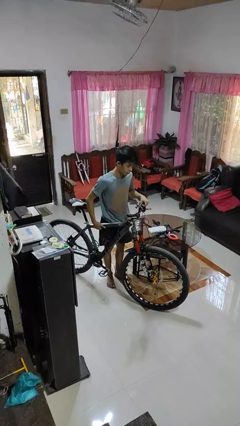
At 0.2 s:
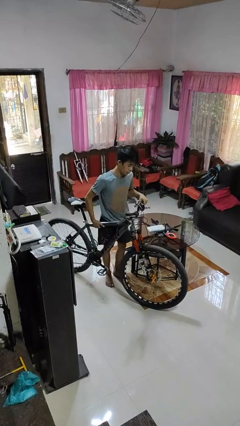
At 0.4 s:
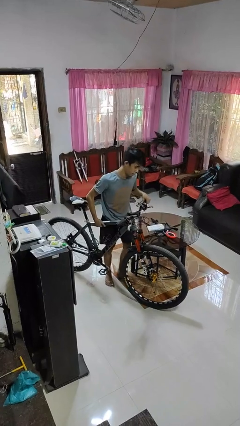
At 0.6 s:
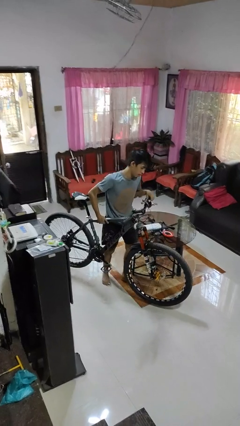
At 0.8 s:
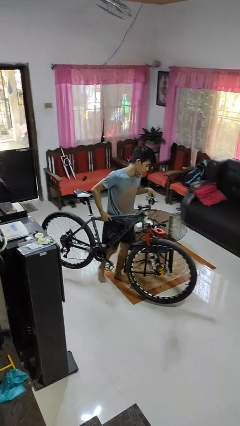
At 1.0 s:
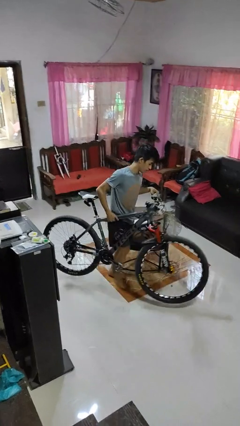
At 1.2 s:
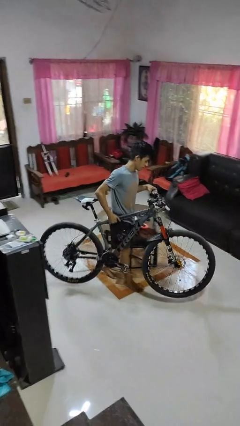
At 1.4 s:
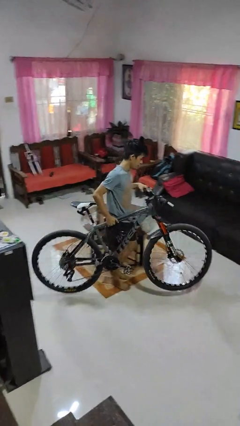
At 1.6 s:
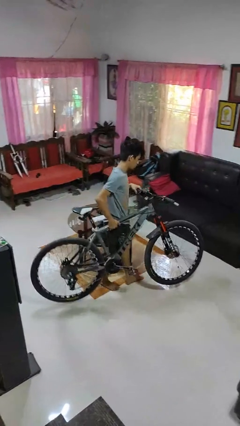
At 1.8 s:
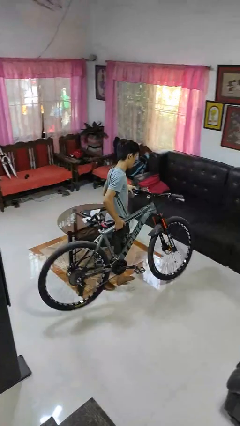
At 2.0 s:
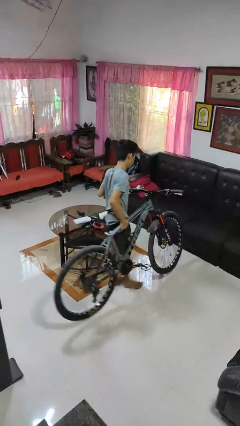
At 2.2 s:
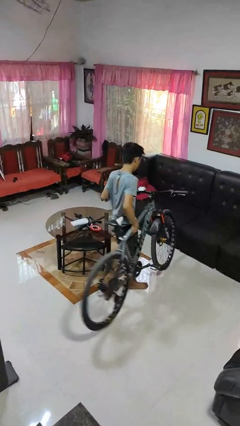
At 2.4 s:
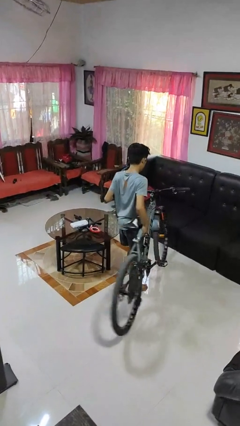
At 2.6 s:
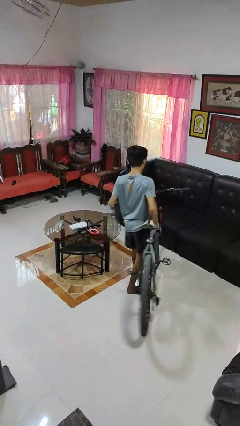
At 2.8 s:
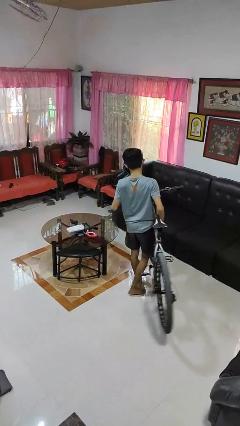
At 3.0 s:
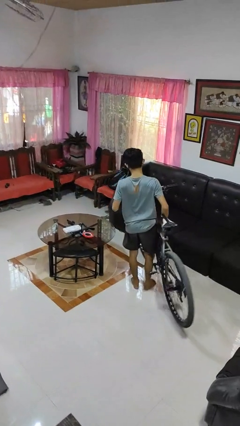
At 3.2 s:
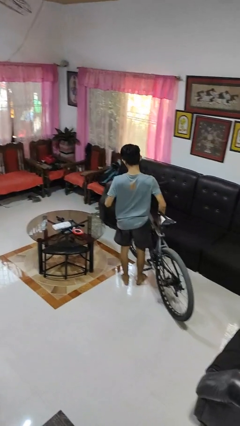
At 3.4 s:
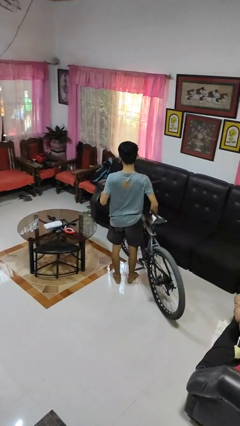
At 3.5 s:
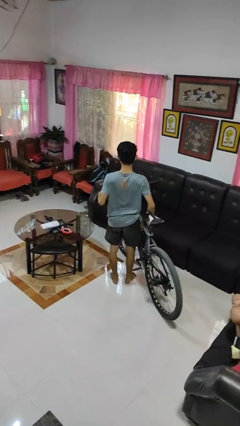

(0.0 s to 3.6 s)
person carries bicycle

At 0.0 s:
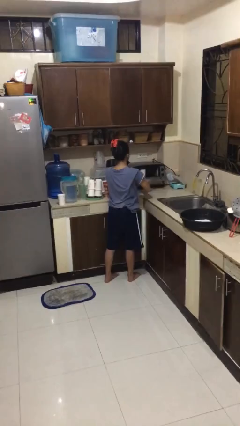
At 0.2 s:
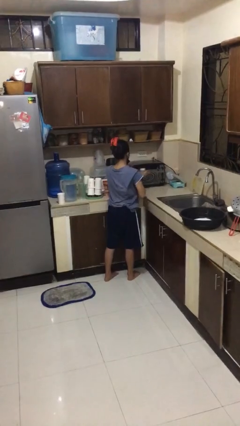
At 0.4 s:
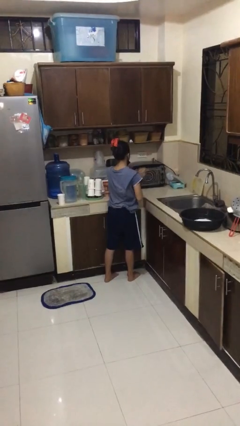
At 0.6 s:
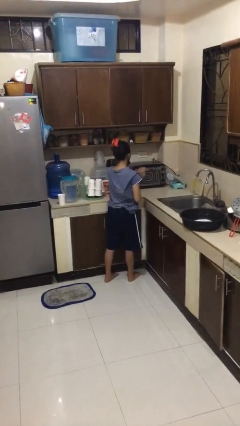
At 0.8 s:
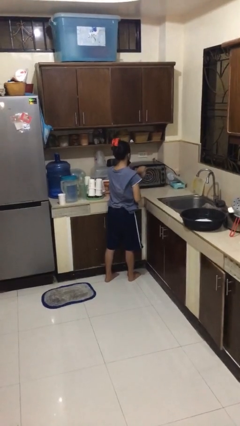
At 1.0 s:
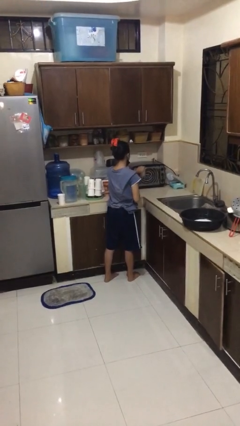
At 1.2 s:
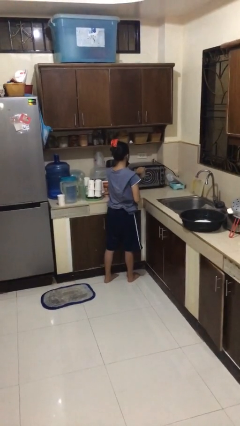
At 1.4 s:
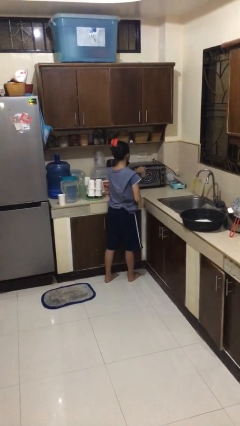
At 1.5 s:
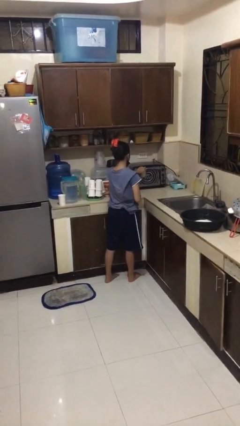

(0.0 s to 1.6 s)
person closes microwave

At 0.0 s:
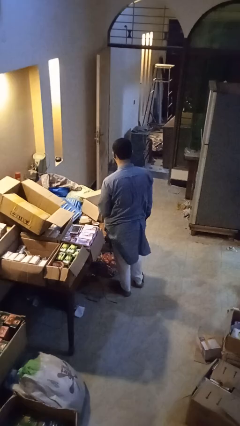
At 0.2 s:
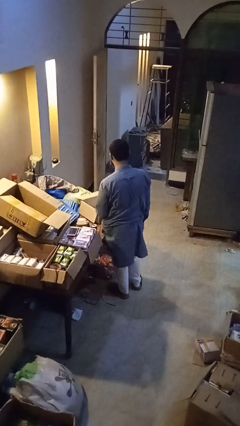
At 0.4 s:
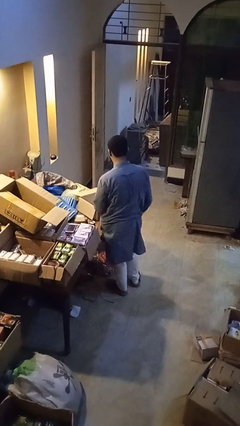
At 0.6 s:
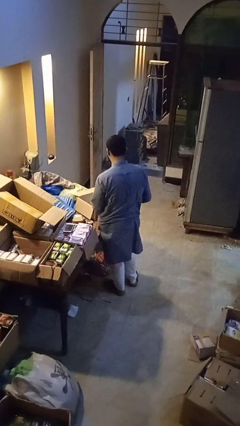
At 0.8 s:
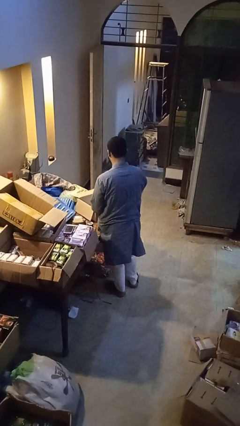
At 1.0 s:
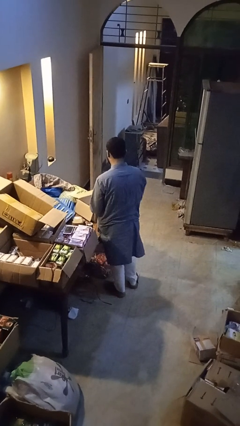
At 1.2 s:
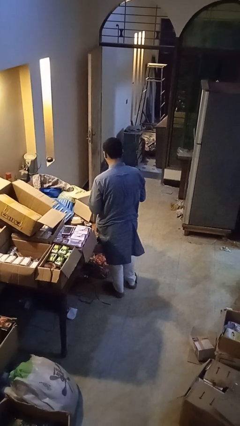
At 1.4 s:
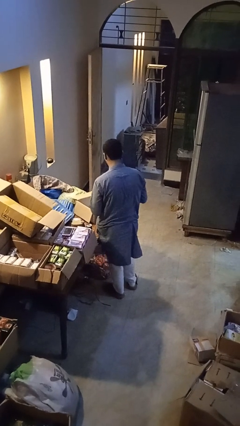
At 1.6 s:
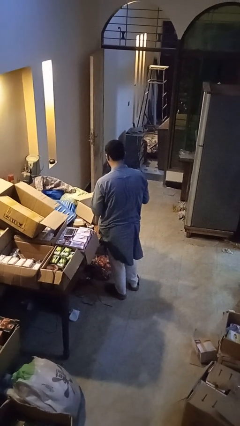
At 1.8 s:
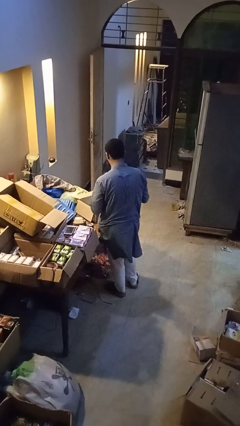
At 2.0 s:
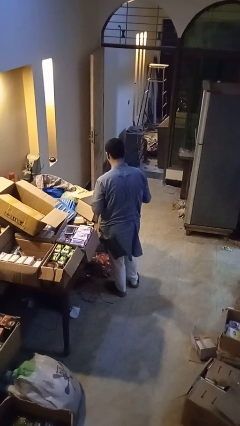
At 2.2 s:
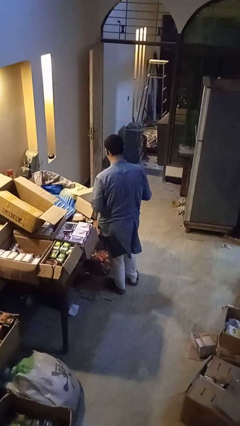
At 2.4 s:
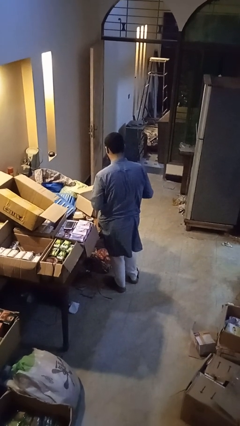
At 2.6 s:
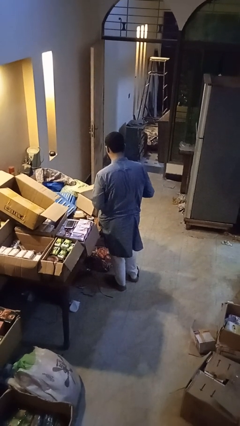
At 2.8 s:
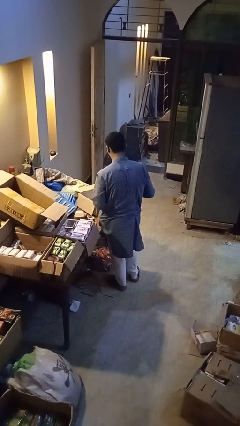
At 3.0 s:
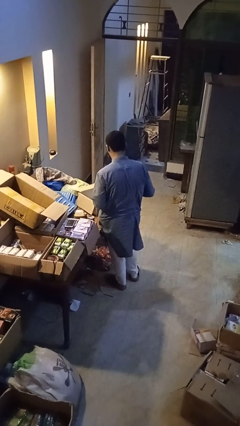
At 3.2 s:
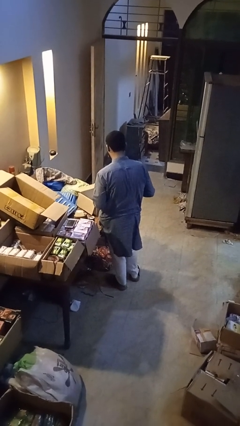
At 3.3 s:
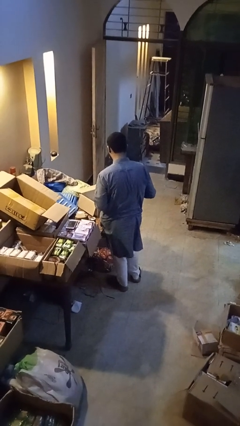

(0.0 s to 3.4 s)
person takes object from box

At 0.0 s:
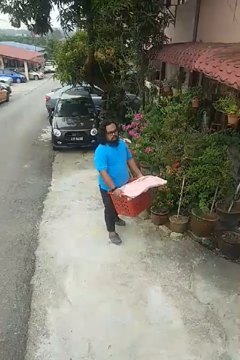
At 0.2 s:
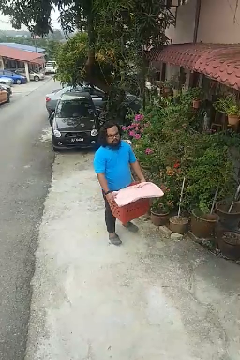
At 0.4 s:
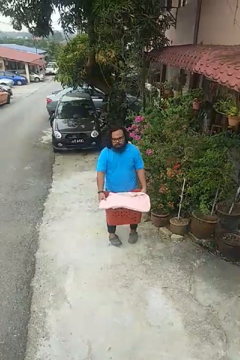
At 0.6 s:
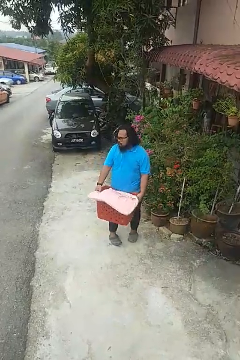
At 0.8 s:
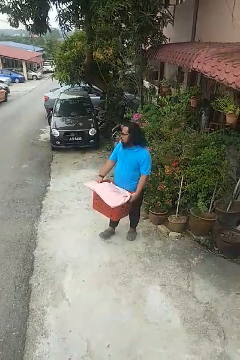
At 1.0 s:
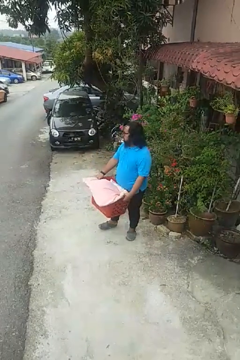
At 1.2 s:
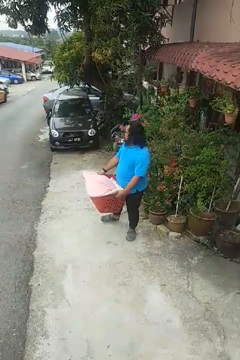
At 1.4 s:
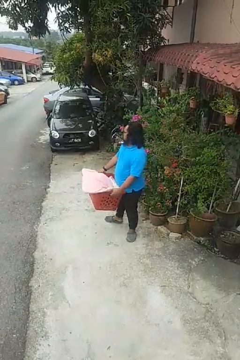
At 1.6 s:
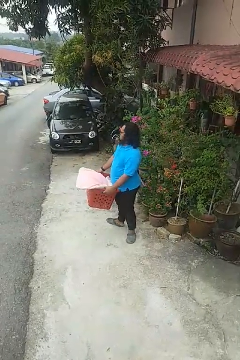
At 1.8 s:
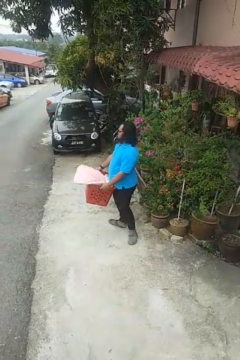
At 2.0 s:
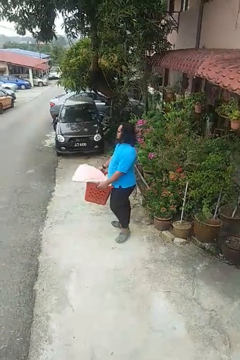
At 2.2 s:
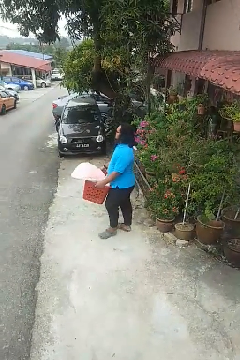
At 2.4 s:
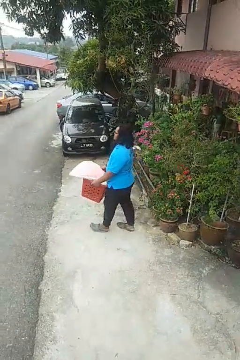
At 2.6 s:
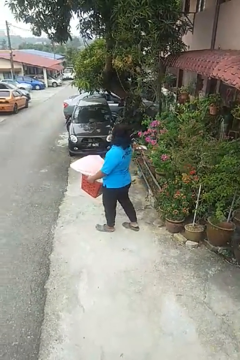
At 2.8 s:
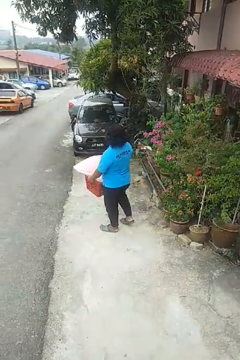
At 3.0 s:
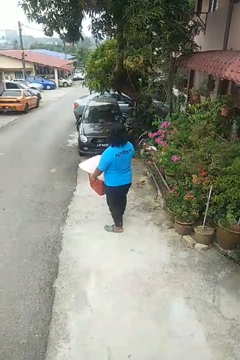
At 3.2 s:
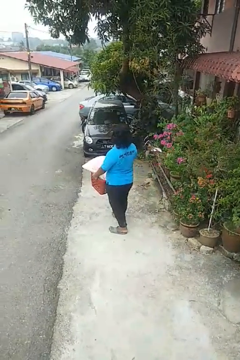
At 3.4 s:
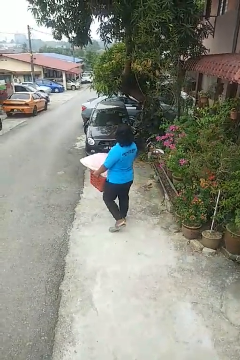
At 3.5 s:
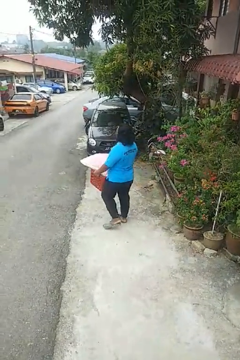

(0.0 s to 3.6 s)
person carries laundry basket

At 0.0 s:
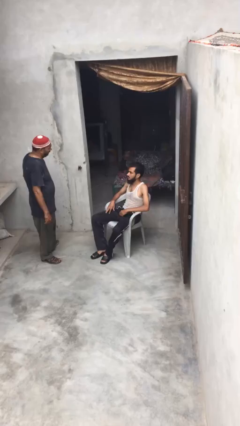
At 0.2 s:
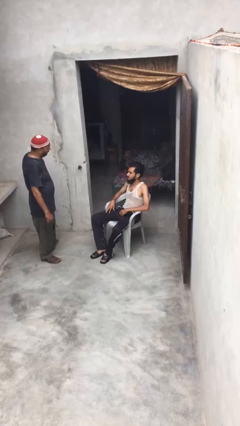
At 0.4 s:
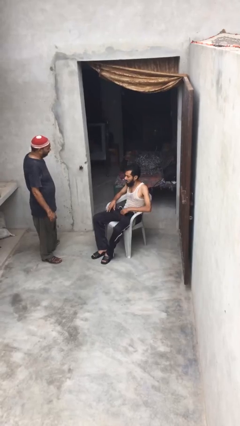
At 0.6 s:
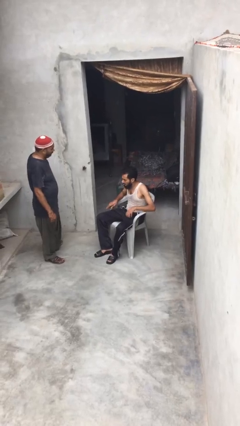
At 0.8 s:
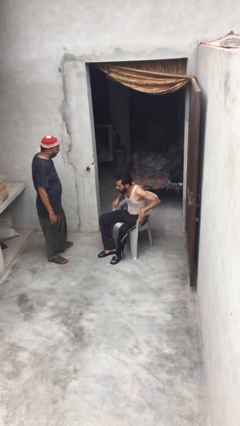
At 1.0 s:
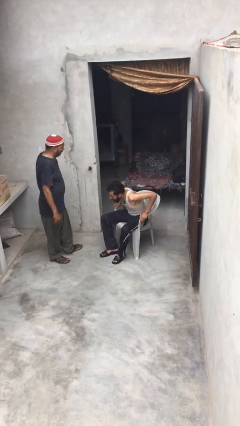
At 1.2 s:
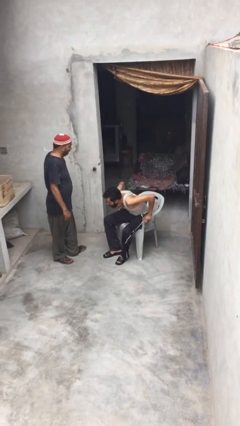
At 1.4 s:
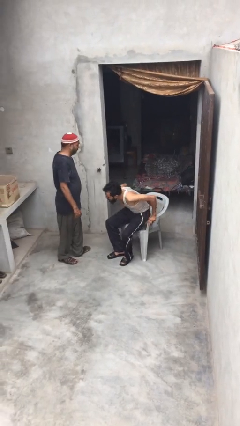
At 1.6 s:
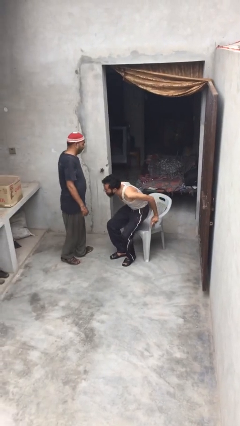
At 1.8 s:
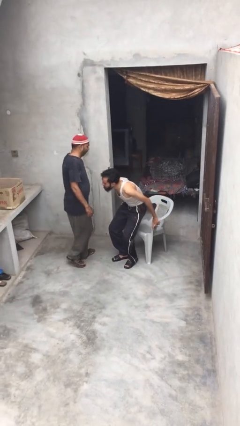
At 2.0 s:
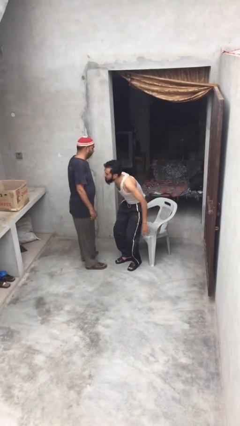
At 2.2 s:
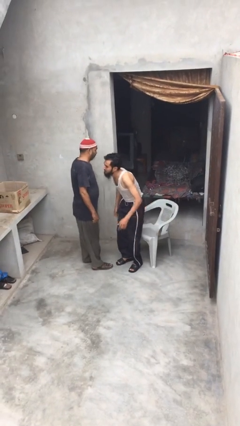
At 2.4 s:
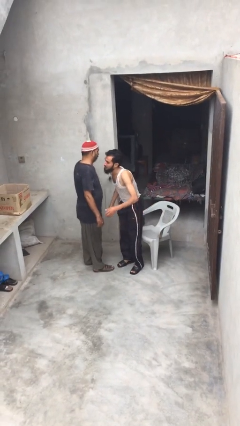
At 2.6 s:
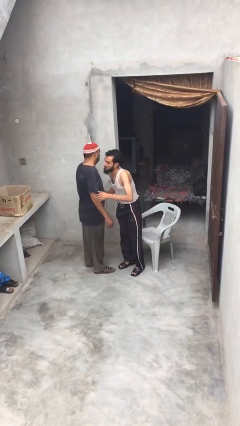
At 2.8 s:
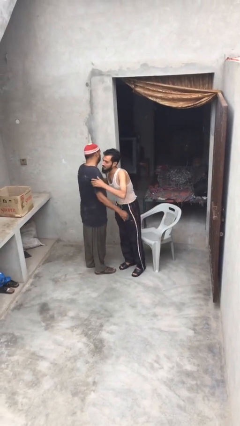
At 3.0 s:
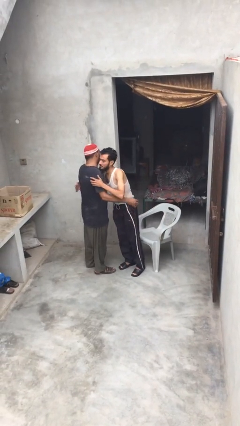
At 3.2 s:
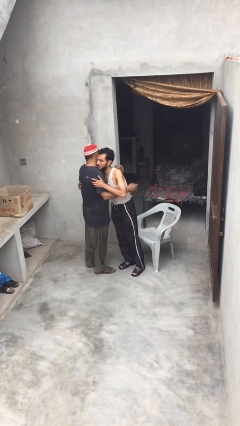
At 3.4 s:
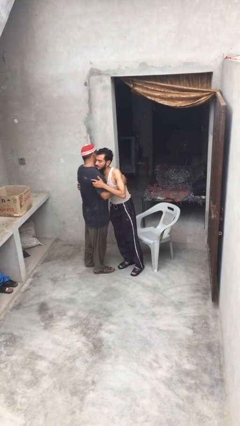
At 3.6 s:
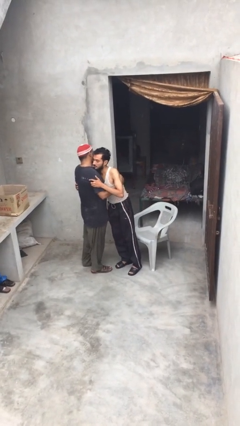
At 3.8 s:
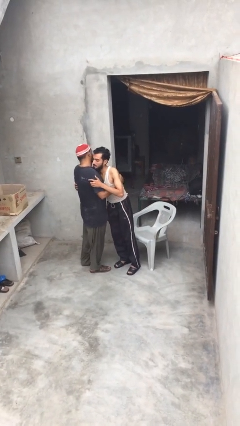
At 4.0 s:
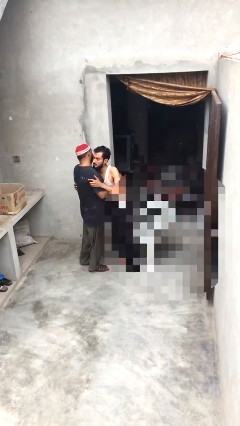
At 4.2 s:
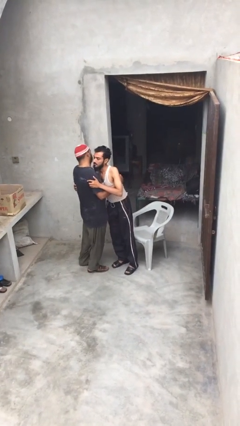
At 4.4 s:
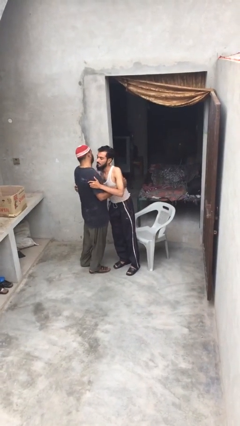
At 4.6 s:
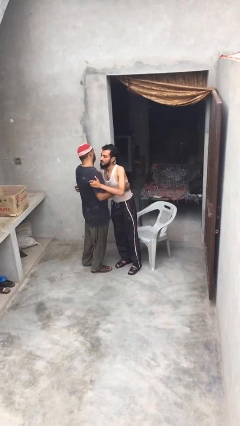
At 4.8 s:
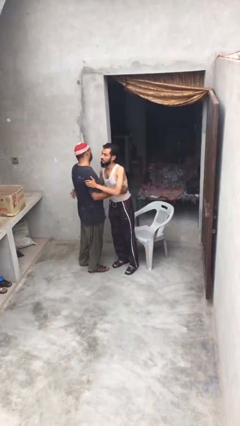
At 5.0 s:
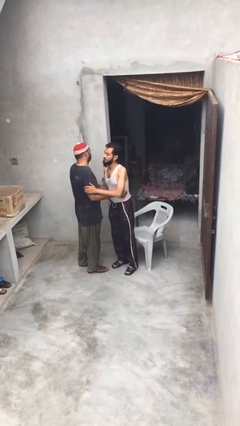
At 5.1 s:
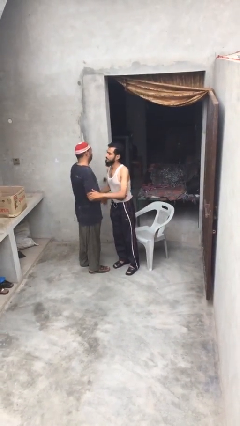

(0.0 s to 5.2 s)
person embraces person

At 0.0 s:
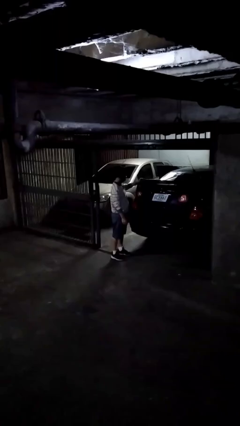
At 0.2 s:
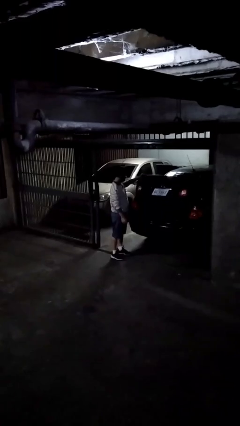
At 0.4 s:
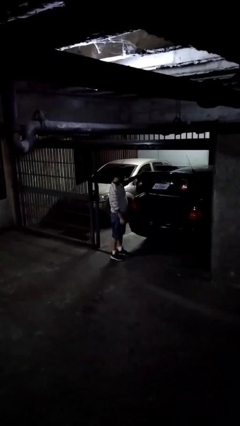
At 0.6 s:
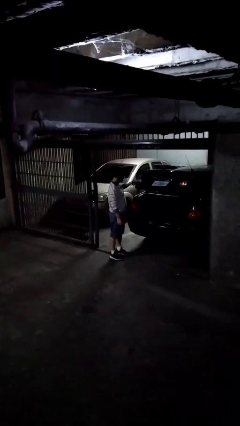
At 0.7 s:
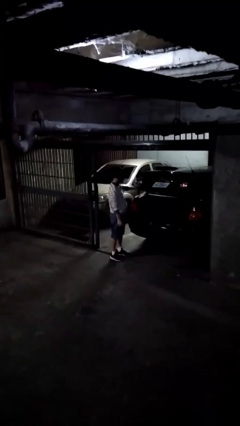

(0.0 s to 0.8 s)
person opens car trunk
